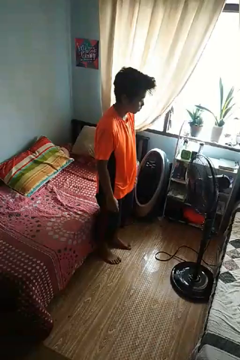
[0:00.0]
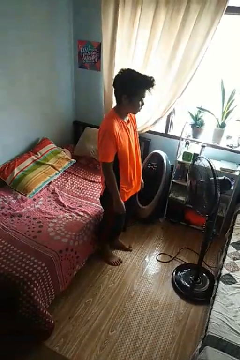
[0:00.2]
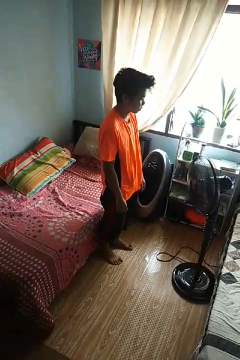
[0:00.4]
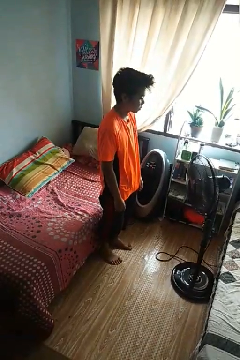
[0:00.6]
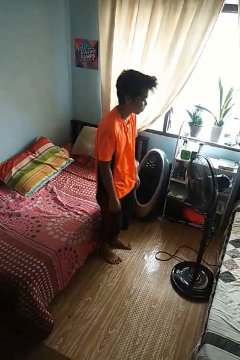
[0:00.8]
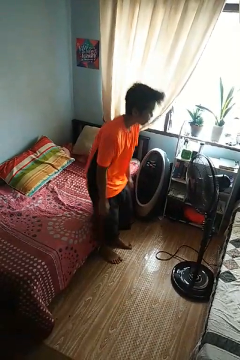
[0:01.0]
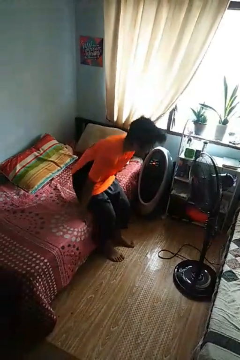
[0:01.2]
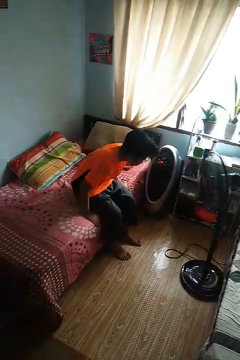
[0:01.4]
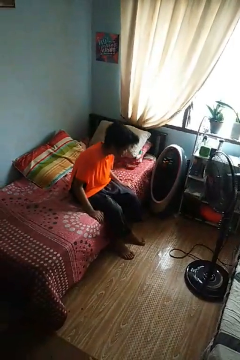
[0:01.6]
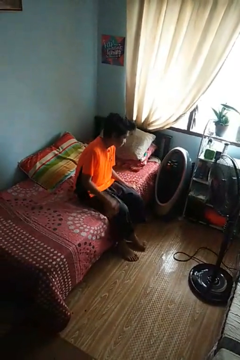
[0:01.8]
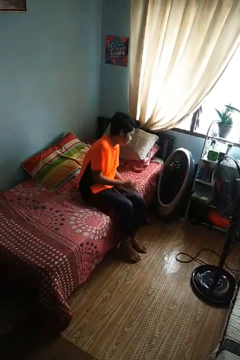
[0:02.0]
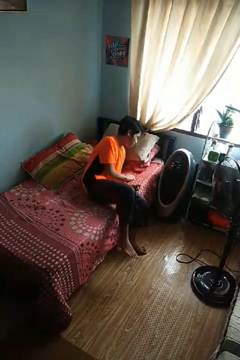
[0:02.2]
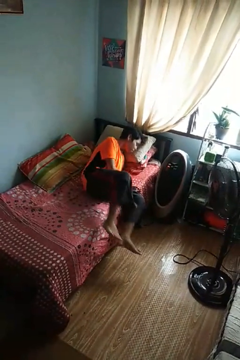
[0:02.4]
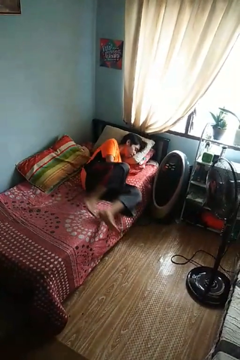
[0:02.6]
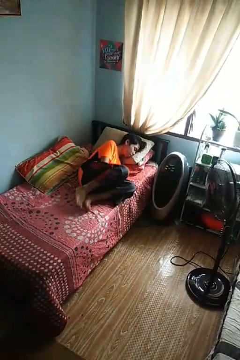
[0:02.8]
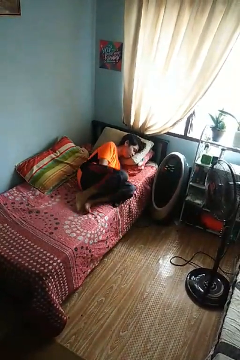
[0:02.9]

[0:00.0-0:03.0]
person lies down on bed

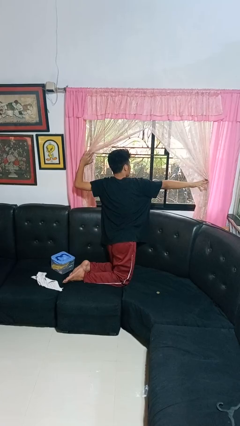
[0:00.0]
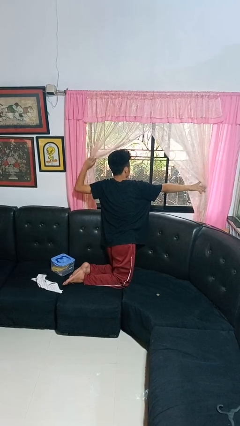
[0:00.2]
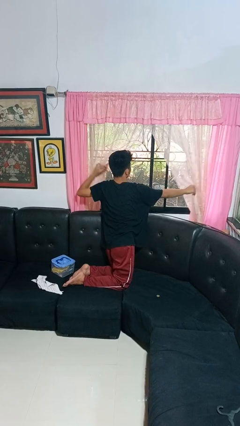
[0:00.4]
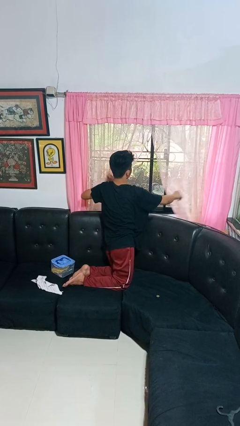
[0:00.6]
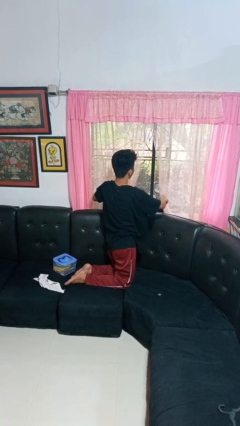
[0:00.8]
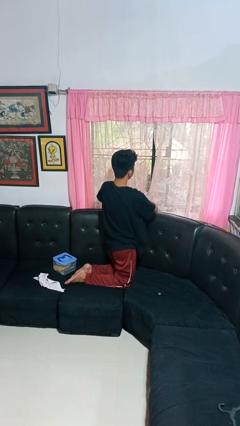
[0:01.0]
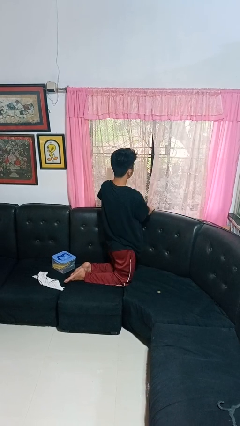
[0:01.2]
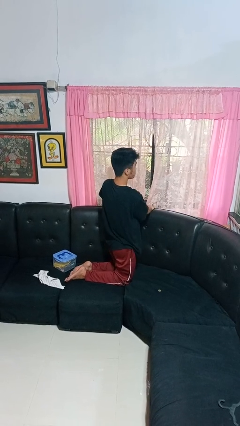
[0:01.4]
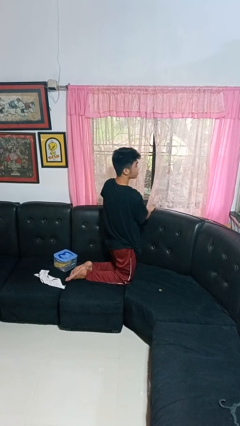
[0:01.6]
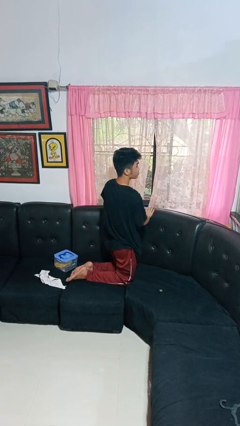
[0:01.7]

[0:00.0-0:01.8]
person closes curtains

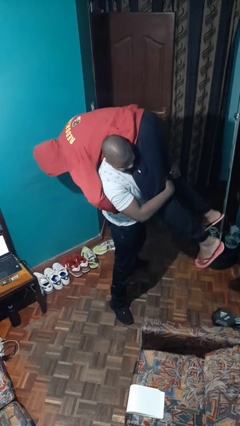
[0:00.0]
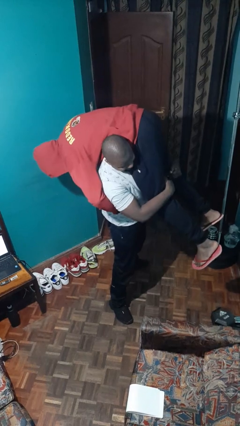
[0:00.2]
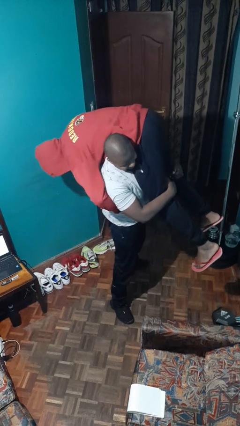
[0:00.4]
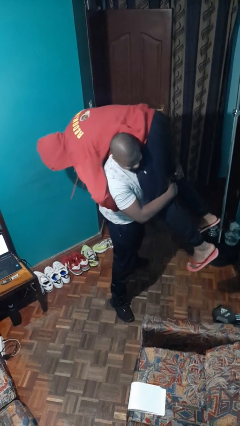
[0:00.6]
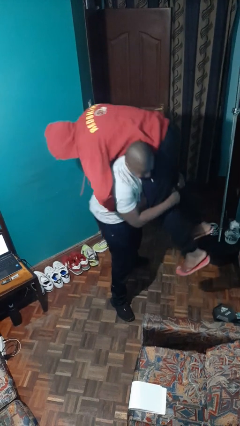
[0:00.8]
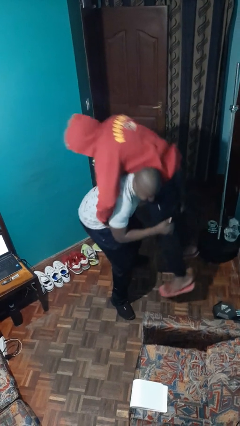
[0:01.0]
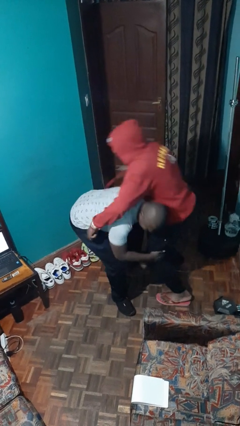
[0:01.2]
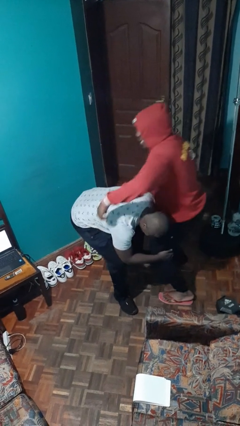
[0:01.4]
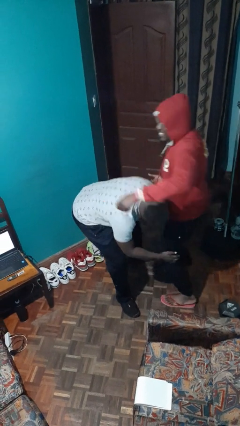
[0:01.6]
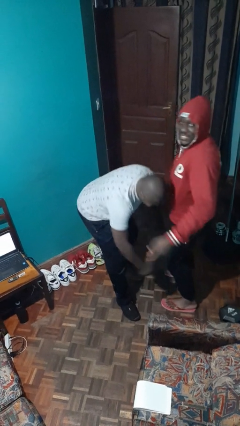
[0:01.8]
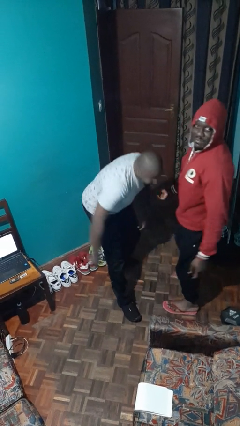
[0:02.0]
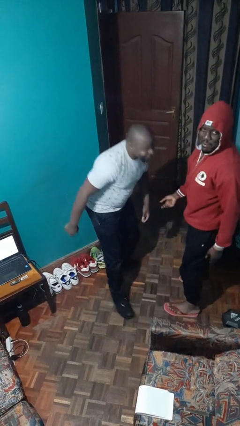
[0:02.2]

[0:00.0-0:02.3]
person puts down person

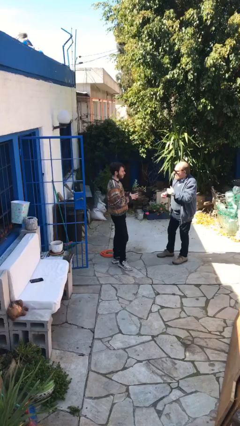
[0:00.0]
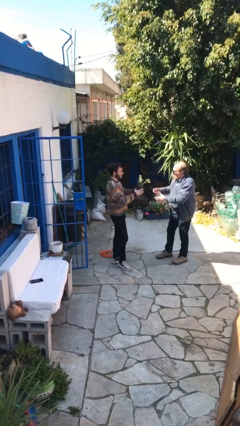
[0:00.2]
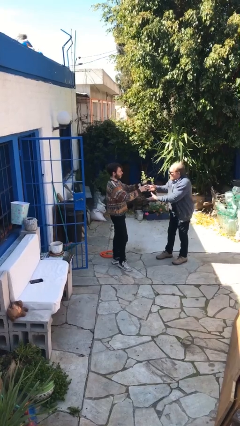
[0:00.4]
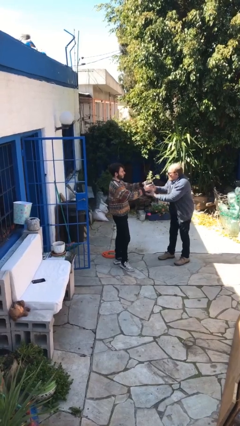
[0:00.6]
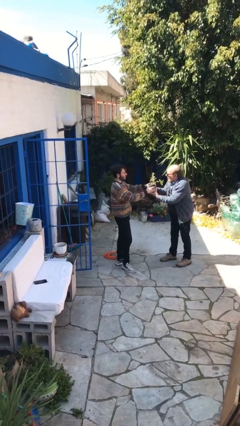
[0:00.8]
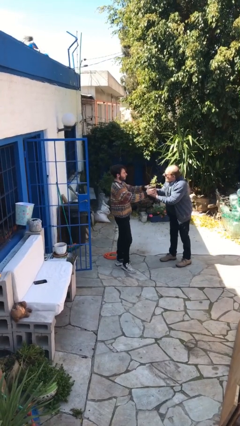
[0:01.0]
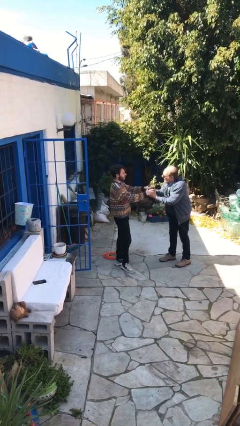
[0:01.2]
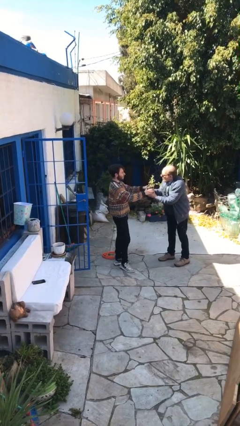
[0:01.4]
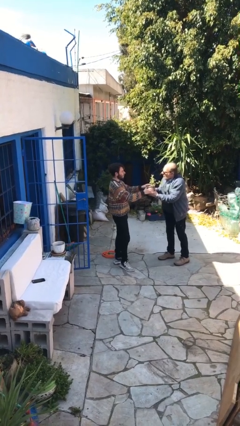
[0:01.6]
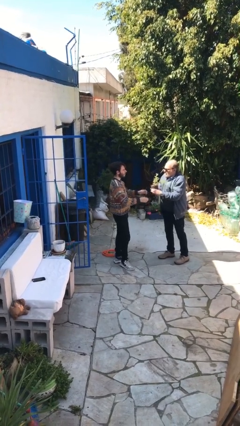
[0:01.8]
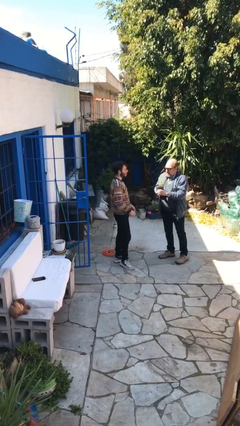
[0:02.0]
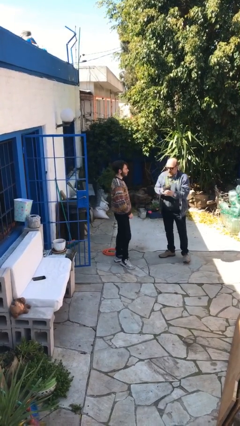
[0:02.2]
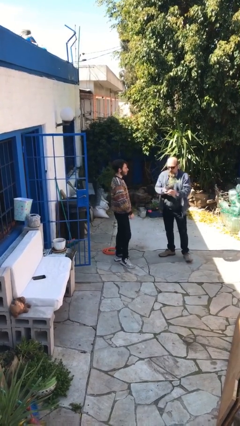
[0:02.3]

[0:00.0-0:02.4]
person transfers object to person

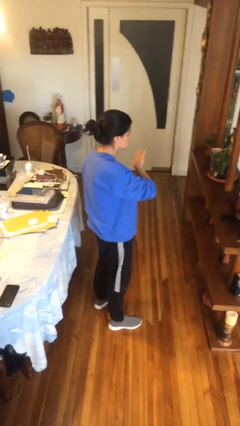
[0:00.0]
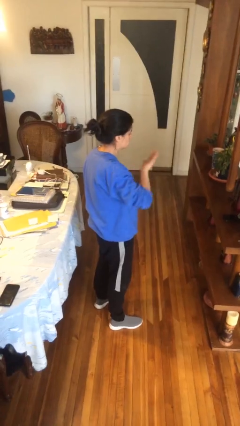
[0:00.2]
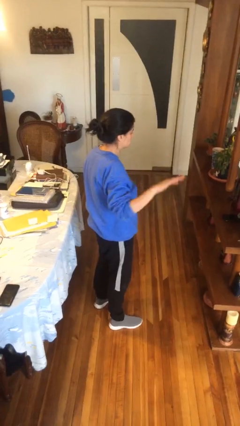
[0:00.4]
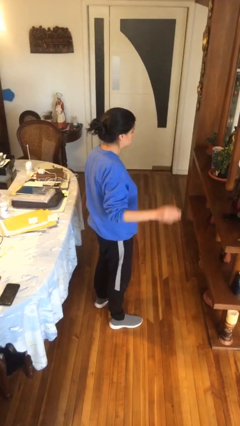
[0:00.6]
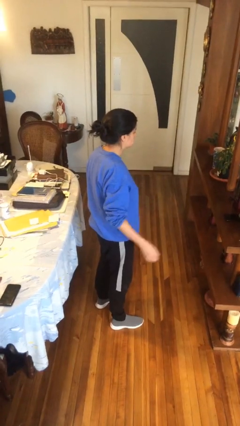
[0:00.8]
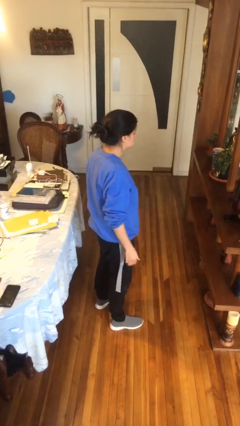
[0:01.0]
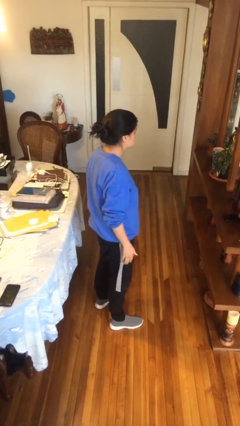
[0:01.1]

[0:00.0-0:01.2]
person gestures swipe right

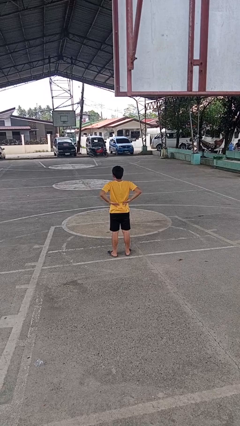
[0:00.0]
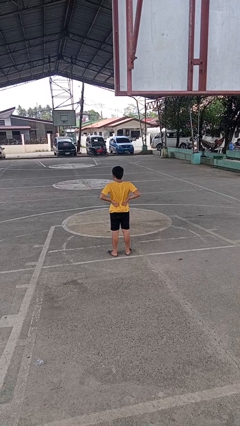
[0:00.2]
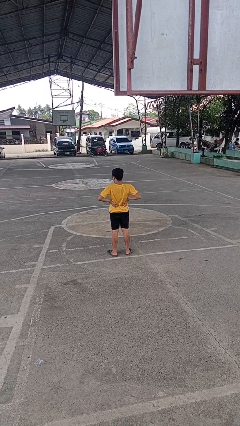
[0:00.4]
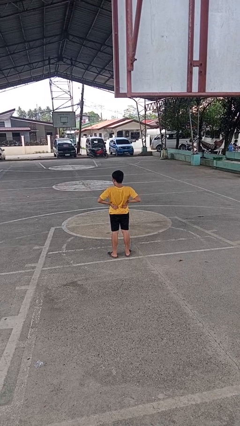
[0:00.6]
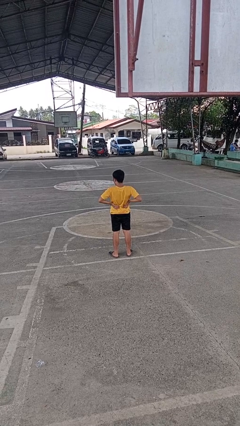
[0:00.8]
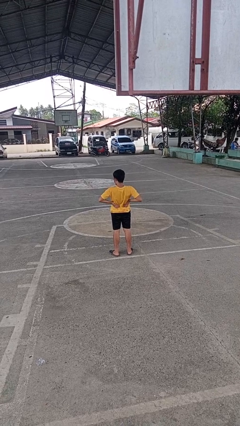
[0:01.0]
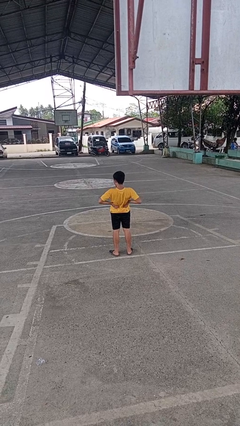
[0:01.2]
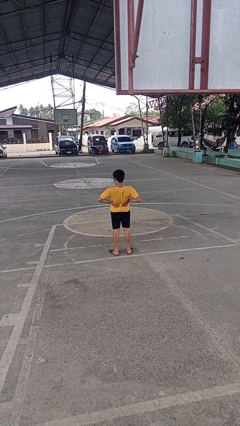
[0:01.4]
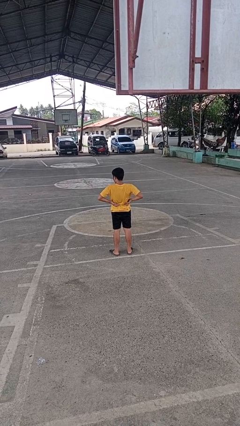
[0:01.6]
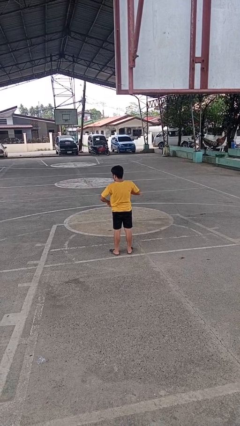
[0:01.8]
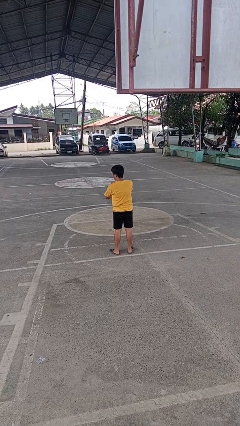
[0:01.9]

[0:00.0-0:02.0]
person stretches back

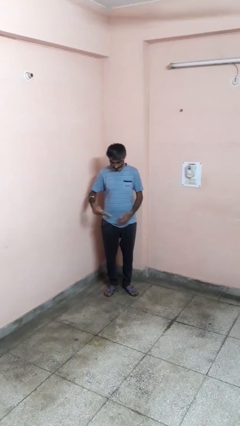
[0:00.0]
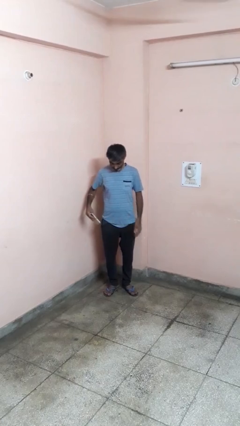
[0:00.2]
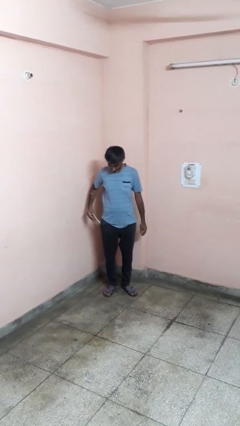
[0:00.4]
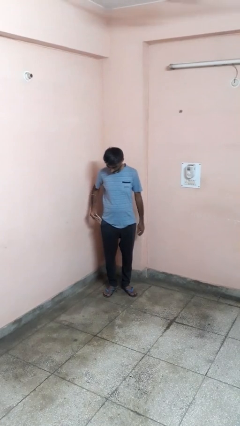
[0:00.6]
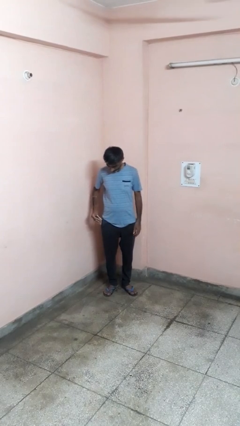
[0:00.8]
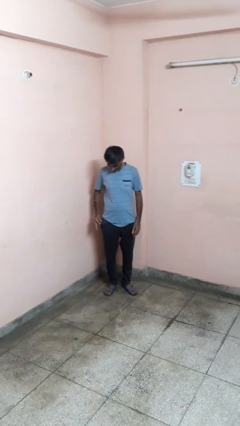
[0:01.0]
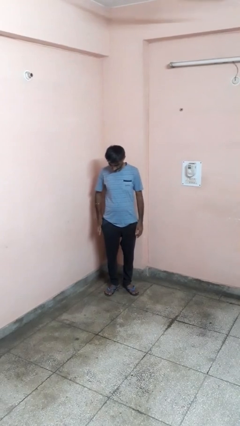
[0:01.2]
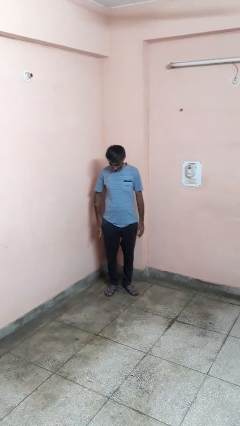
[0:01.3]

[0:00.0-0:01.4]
person puts phone into pocket

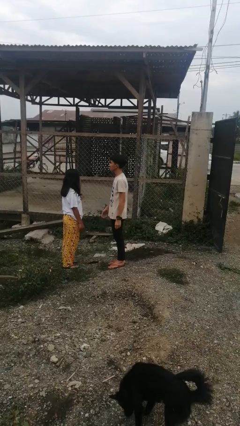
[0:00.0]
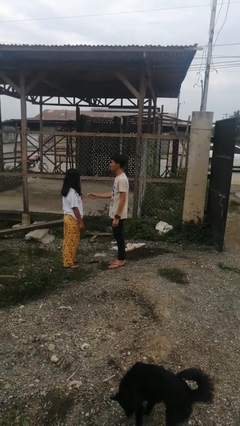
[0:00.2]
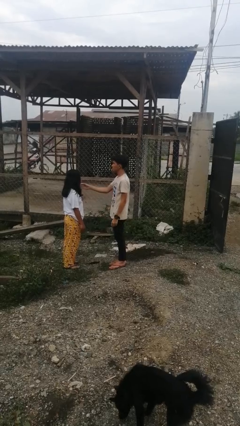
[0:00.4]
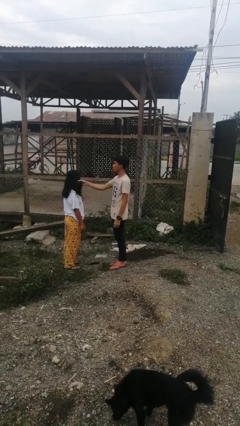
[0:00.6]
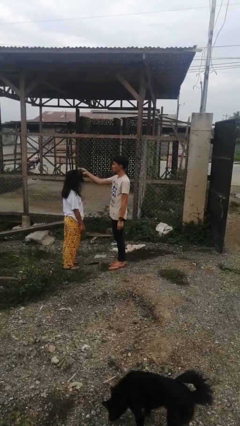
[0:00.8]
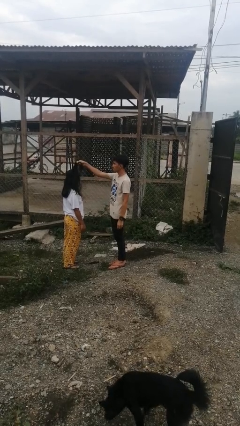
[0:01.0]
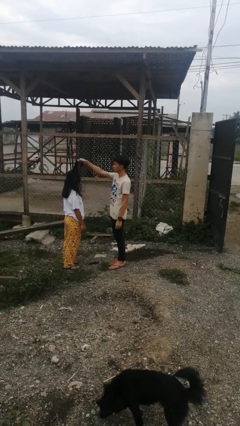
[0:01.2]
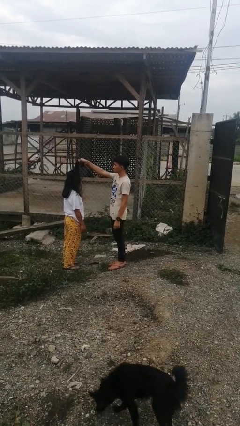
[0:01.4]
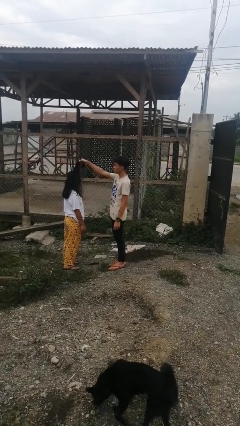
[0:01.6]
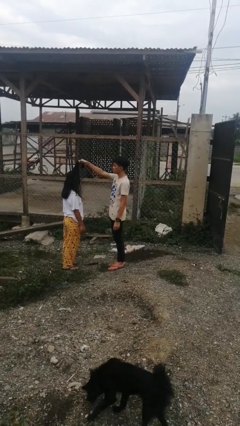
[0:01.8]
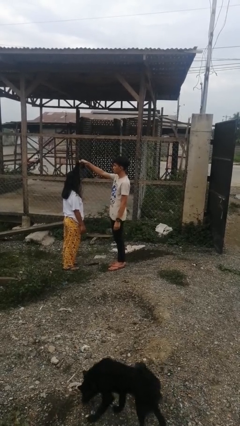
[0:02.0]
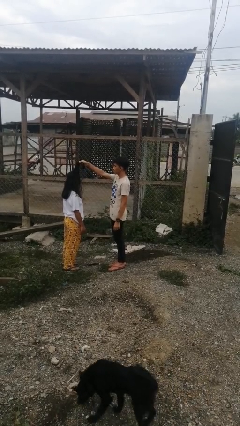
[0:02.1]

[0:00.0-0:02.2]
person grabs person by hair

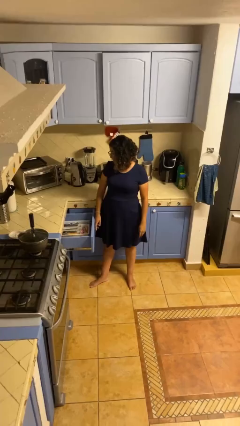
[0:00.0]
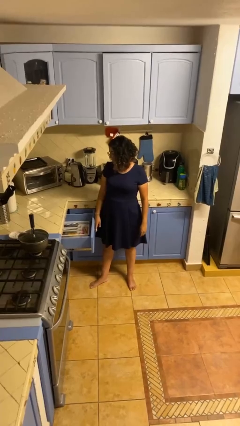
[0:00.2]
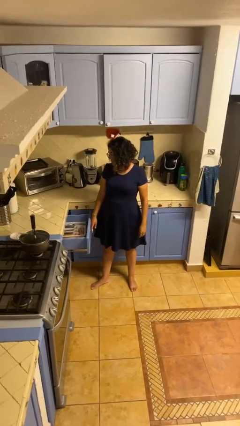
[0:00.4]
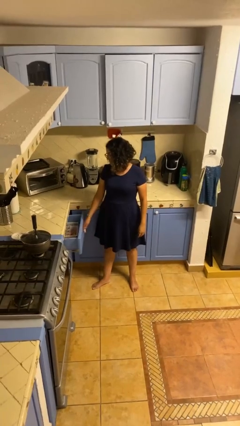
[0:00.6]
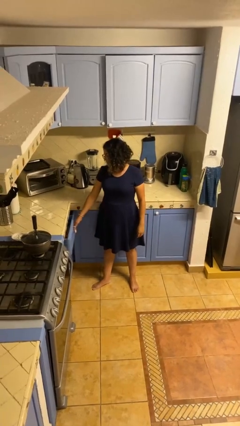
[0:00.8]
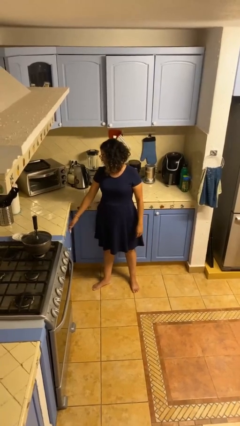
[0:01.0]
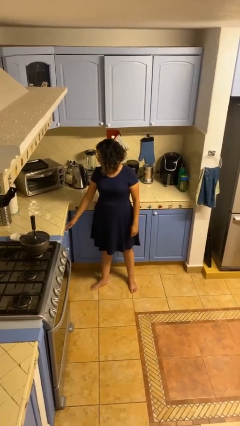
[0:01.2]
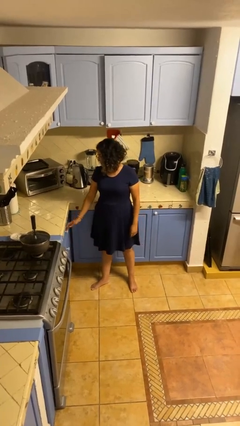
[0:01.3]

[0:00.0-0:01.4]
person closes kitchen drawer
